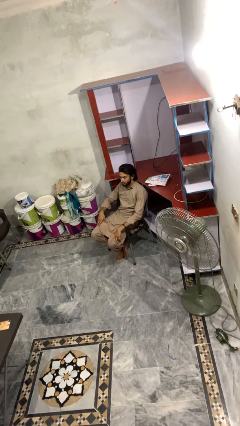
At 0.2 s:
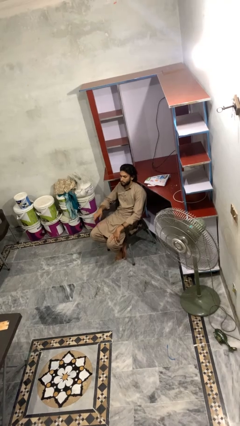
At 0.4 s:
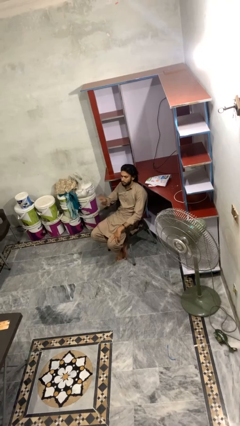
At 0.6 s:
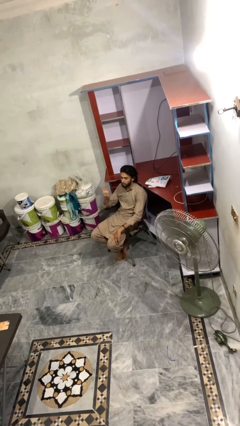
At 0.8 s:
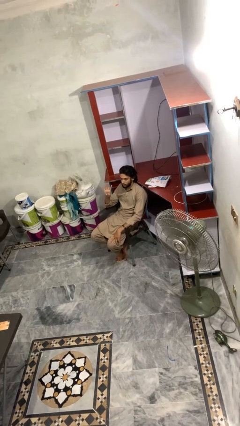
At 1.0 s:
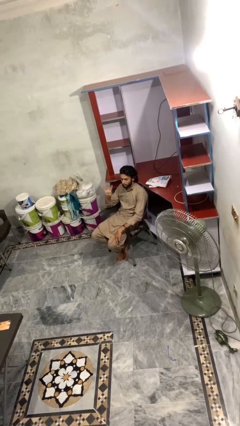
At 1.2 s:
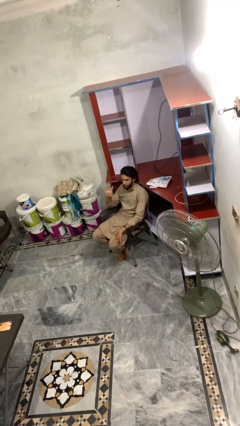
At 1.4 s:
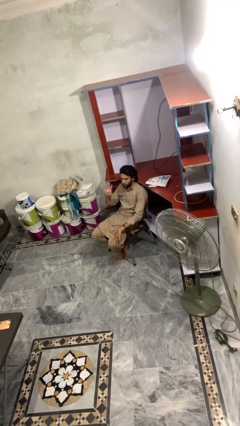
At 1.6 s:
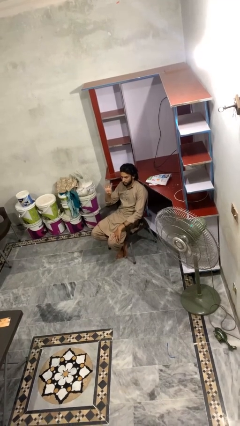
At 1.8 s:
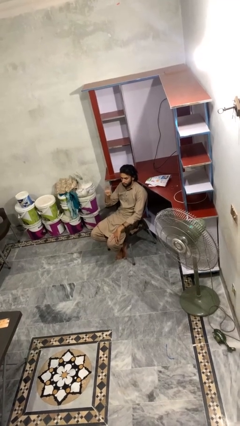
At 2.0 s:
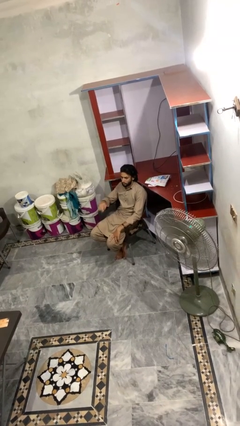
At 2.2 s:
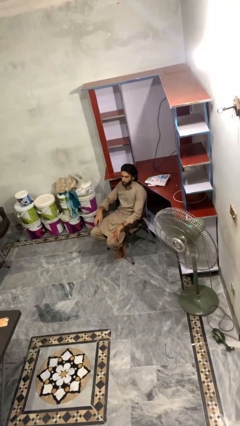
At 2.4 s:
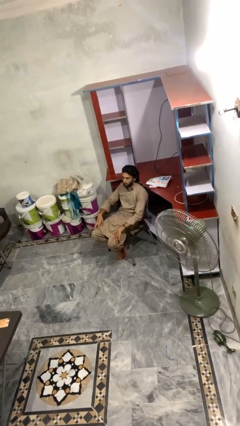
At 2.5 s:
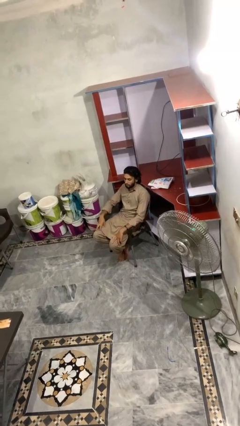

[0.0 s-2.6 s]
person gestures number four

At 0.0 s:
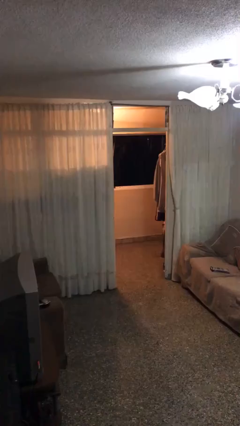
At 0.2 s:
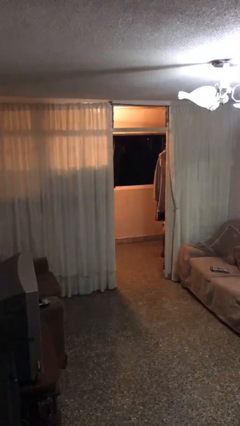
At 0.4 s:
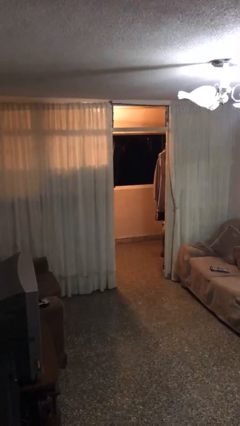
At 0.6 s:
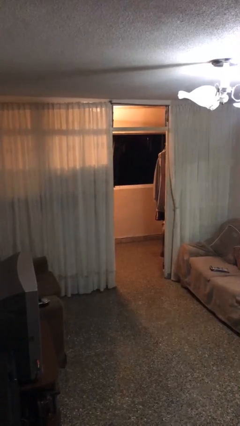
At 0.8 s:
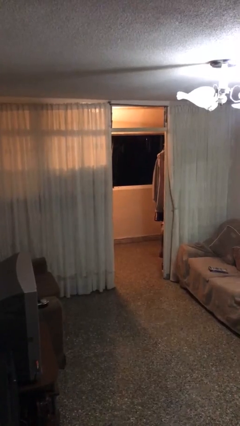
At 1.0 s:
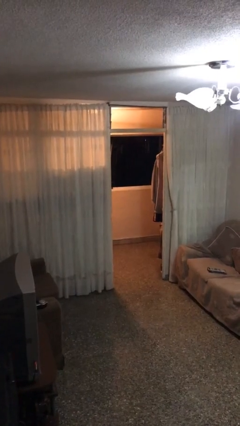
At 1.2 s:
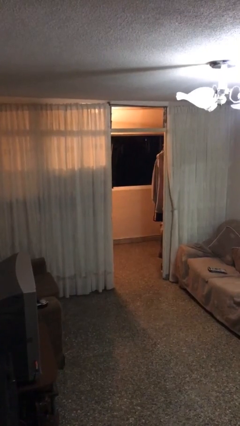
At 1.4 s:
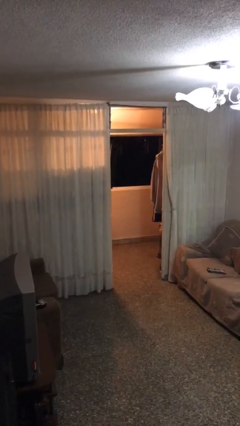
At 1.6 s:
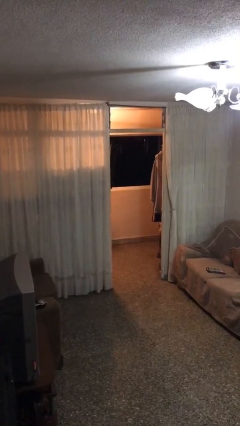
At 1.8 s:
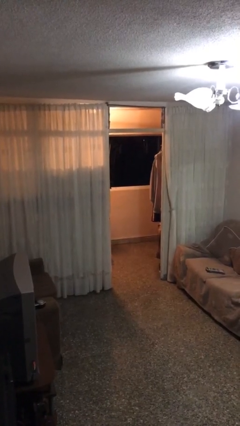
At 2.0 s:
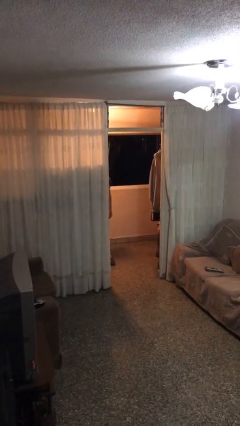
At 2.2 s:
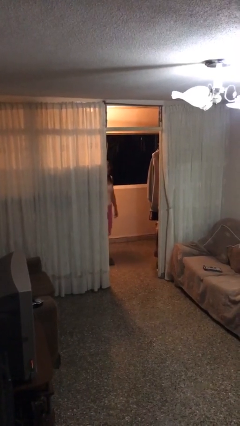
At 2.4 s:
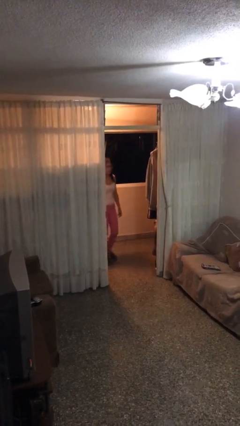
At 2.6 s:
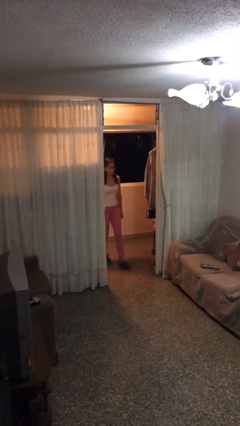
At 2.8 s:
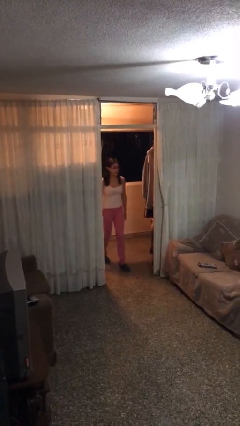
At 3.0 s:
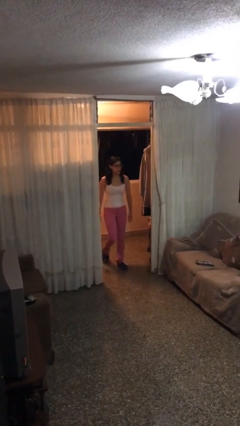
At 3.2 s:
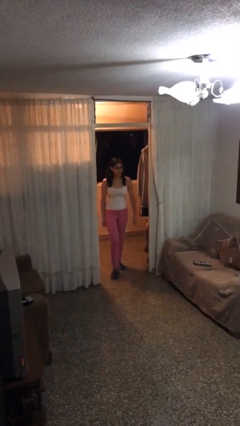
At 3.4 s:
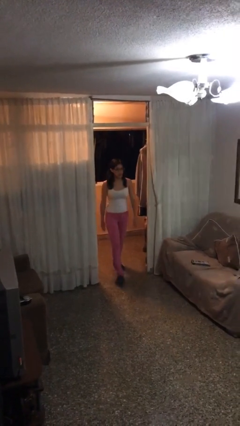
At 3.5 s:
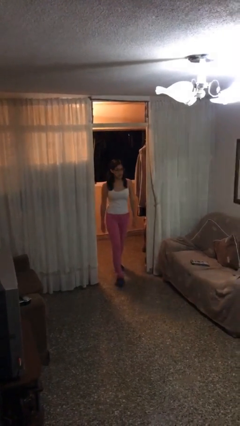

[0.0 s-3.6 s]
person enters scene through structure

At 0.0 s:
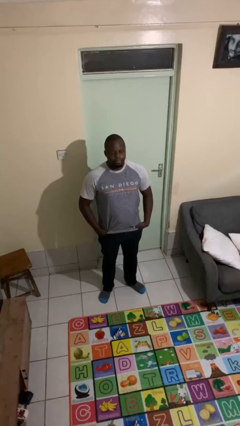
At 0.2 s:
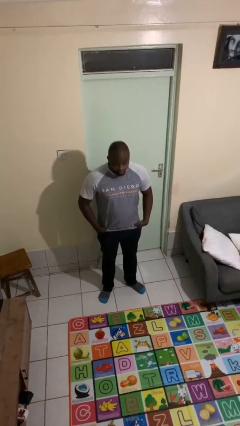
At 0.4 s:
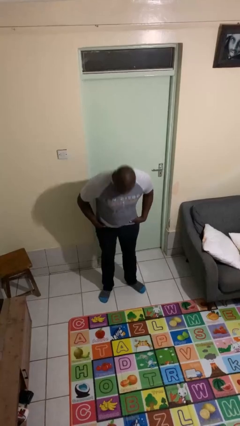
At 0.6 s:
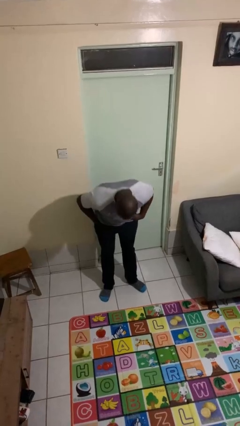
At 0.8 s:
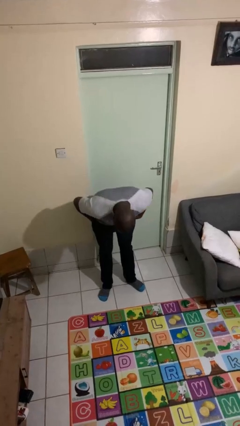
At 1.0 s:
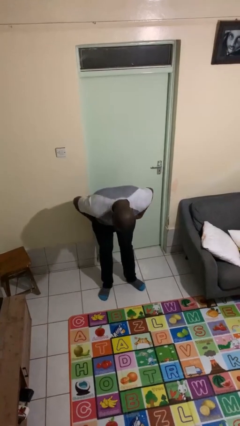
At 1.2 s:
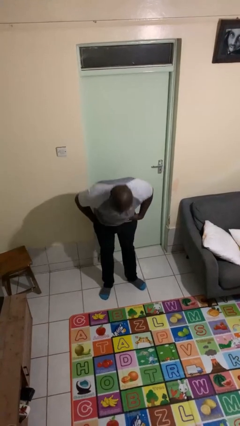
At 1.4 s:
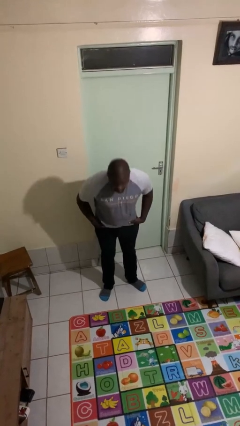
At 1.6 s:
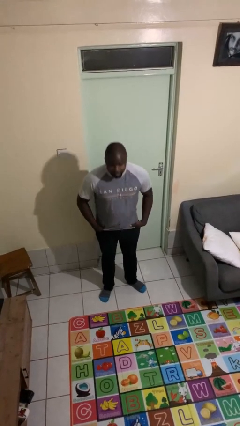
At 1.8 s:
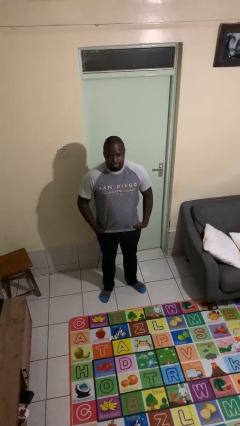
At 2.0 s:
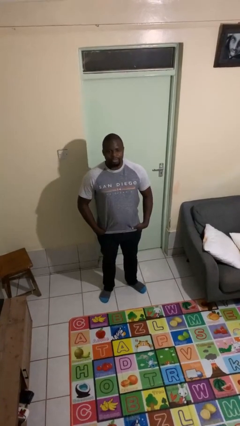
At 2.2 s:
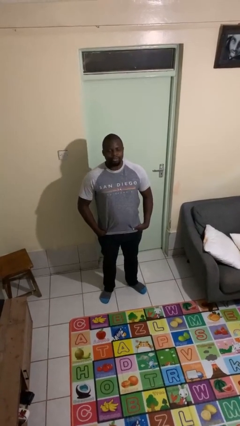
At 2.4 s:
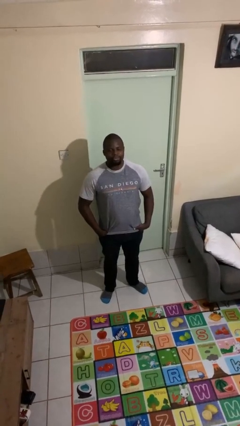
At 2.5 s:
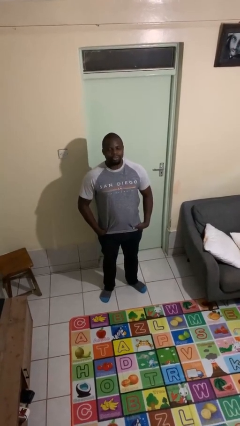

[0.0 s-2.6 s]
person bows

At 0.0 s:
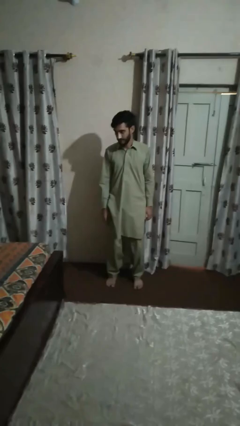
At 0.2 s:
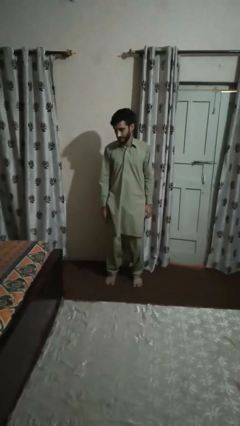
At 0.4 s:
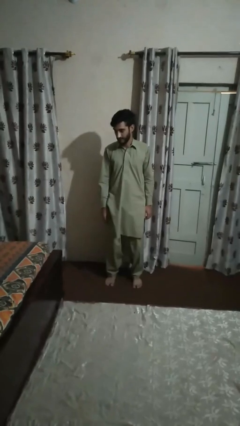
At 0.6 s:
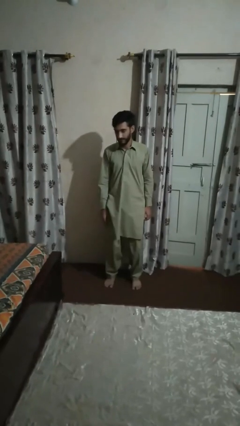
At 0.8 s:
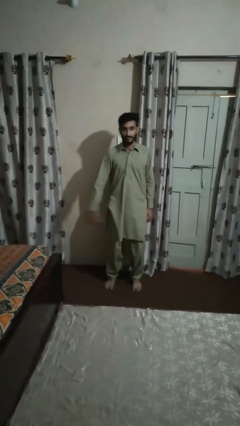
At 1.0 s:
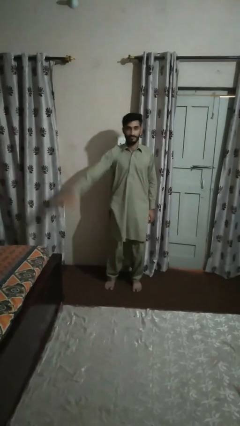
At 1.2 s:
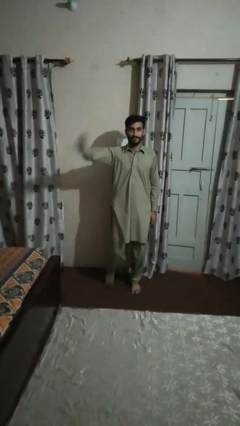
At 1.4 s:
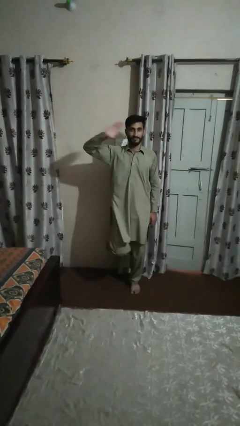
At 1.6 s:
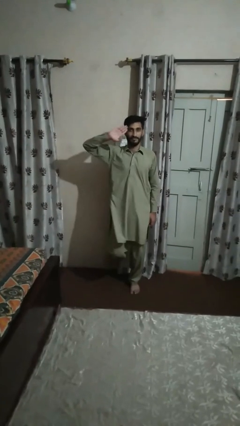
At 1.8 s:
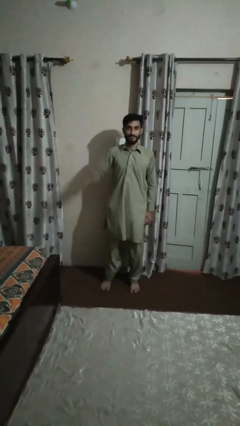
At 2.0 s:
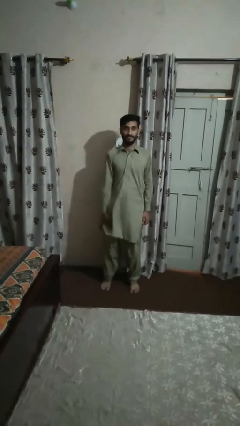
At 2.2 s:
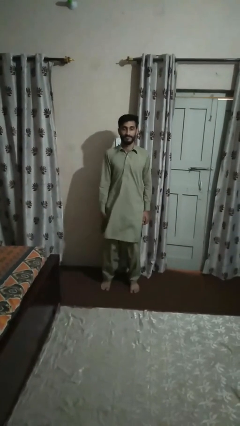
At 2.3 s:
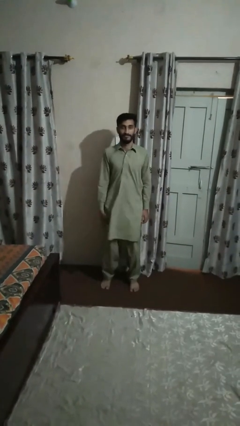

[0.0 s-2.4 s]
person salutes

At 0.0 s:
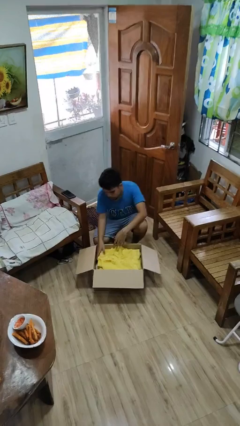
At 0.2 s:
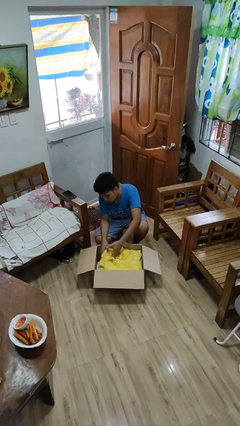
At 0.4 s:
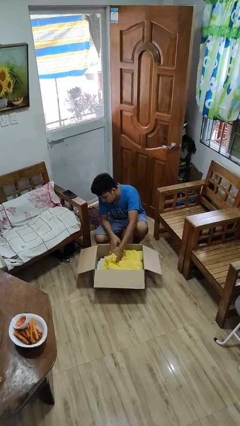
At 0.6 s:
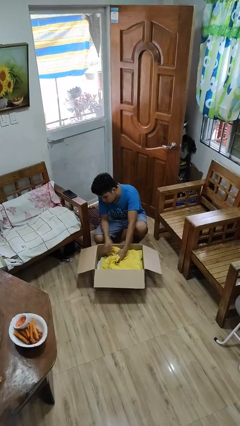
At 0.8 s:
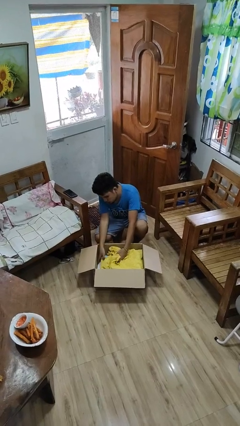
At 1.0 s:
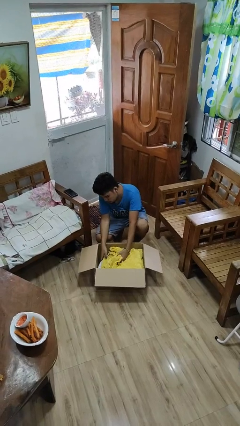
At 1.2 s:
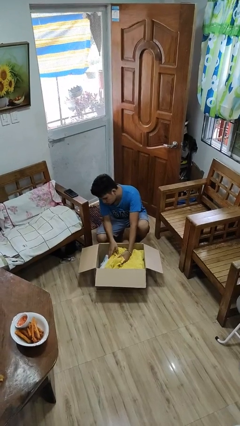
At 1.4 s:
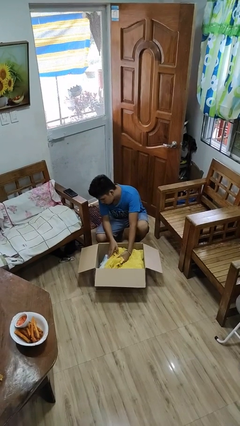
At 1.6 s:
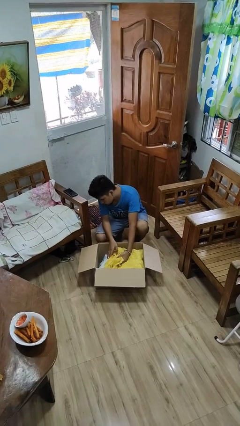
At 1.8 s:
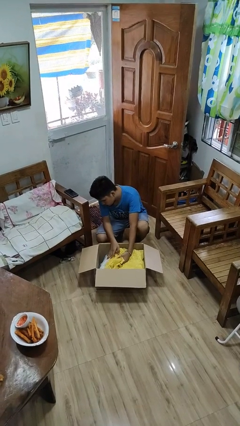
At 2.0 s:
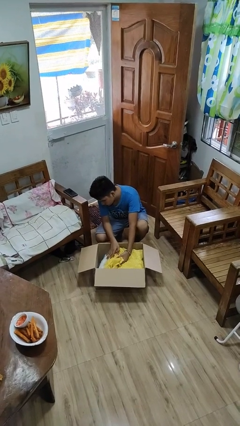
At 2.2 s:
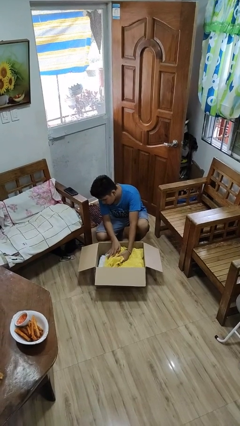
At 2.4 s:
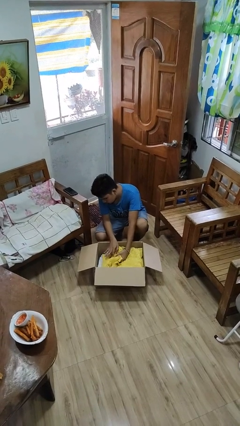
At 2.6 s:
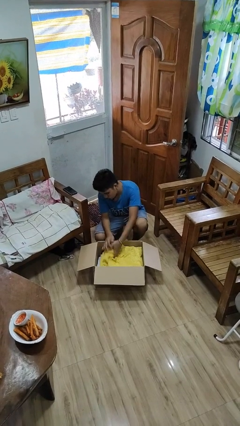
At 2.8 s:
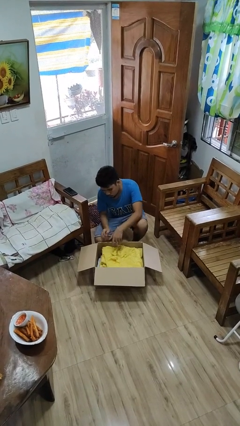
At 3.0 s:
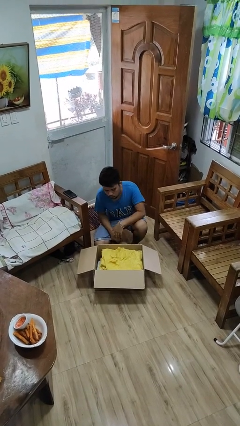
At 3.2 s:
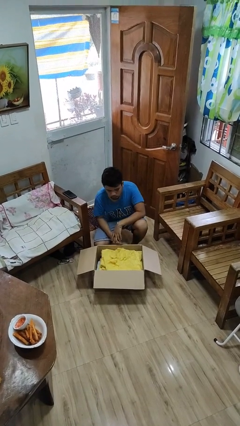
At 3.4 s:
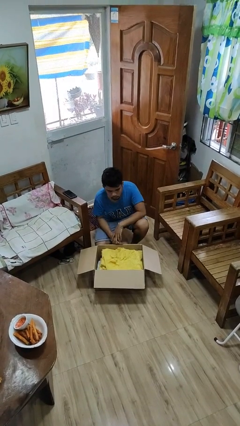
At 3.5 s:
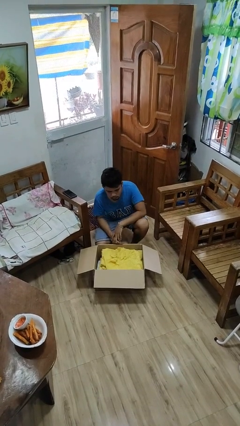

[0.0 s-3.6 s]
person searches in box

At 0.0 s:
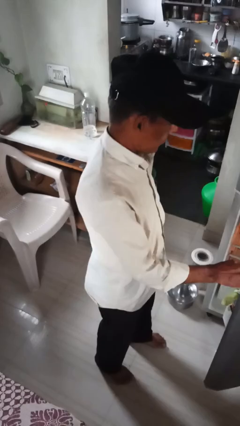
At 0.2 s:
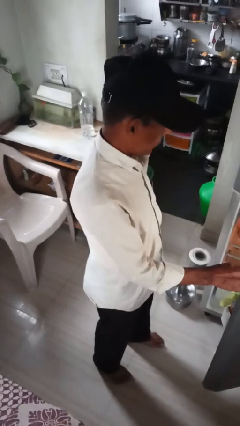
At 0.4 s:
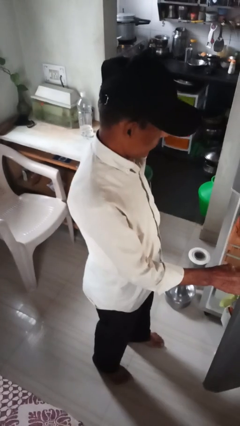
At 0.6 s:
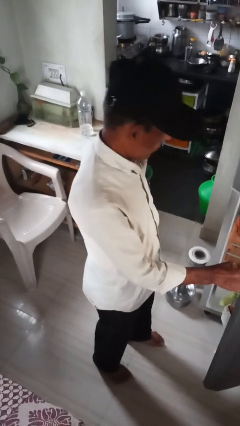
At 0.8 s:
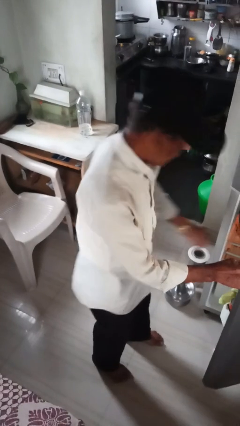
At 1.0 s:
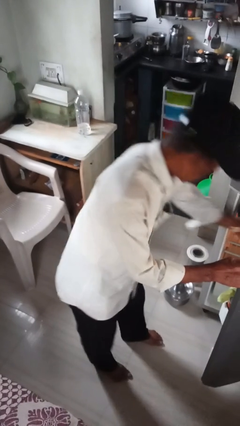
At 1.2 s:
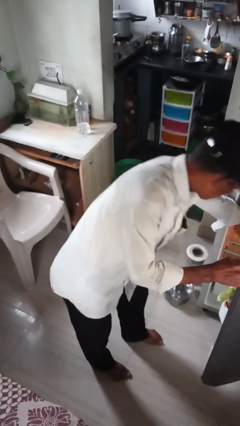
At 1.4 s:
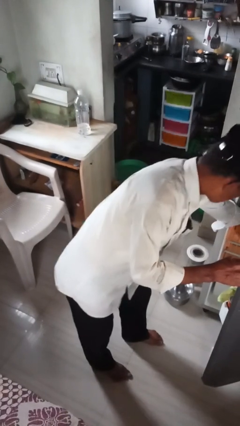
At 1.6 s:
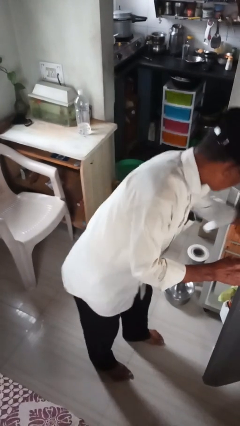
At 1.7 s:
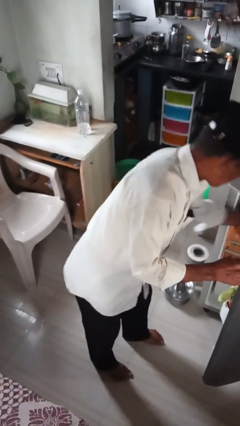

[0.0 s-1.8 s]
person unloads clotheswasher

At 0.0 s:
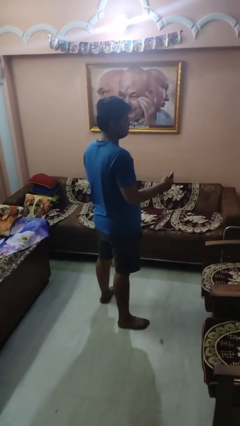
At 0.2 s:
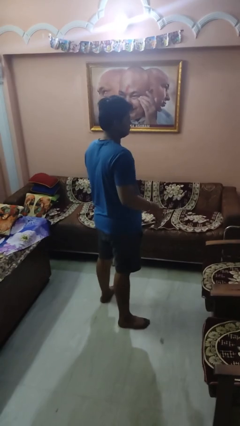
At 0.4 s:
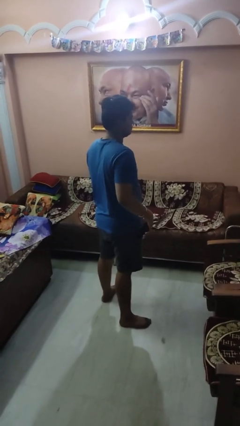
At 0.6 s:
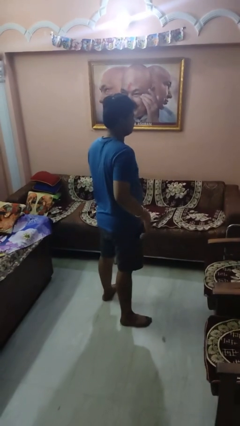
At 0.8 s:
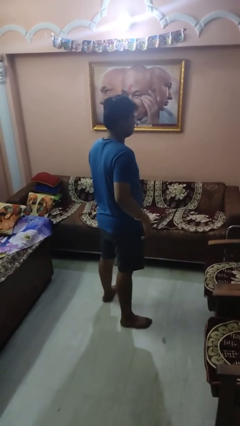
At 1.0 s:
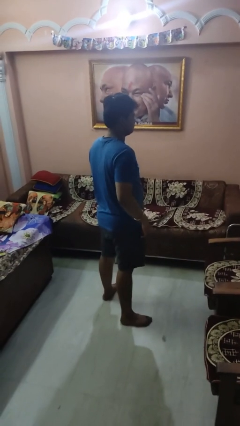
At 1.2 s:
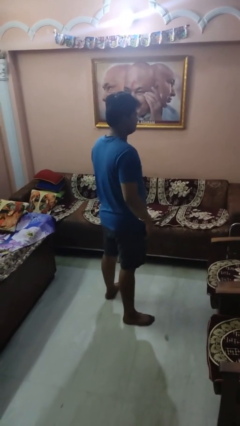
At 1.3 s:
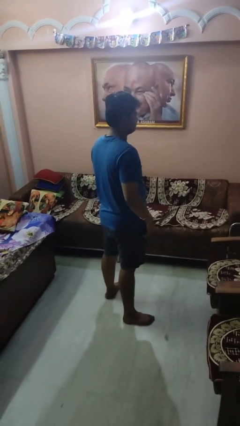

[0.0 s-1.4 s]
person puts phone into pocket
